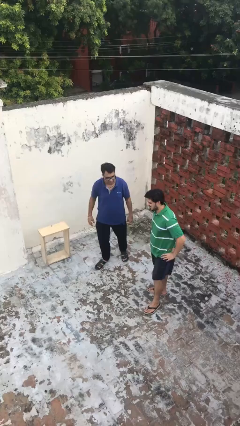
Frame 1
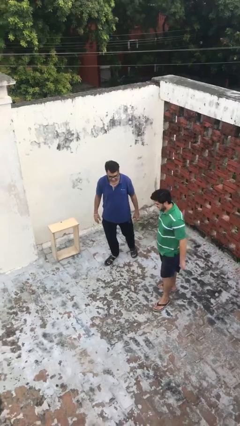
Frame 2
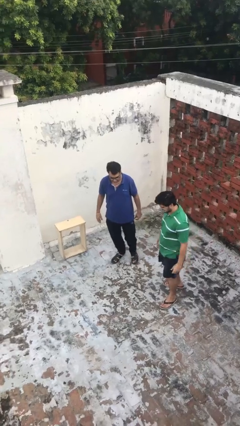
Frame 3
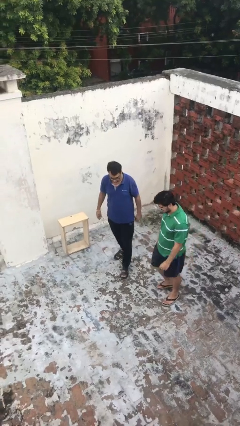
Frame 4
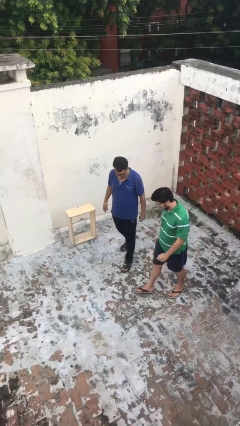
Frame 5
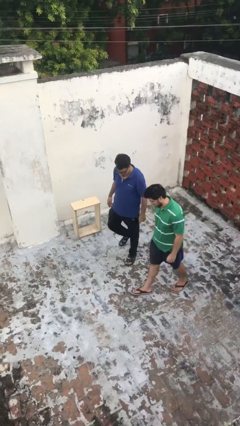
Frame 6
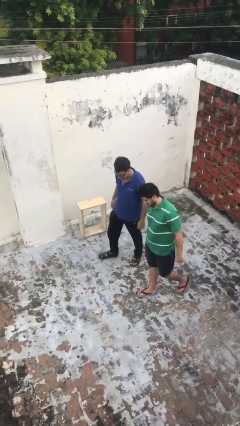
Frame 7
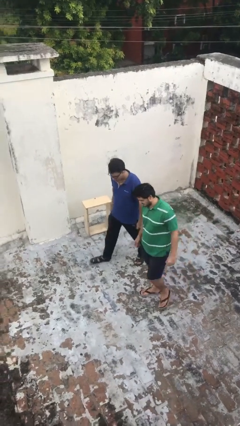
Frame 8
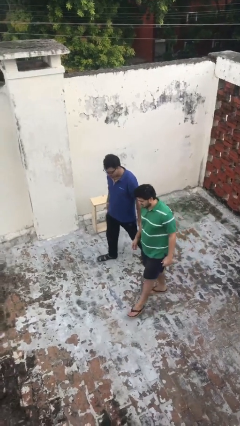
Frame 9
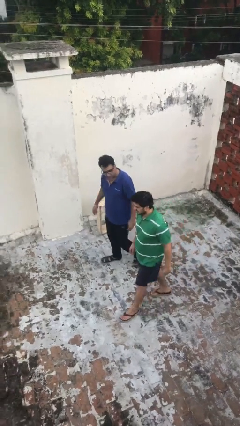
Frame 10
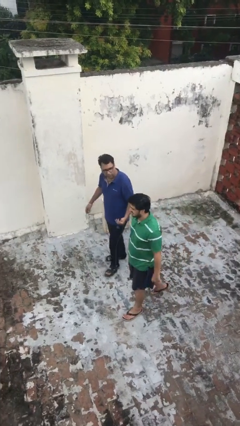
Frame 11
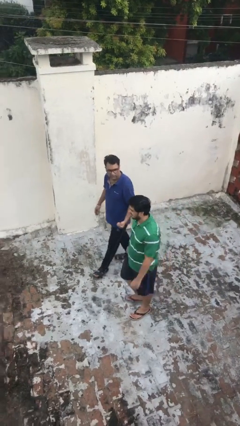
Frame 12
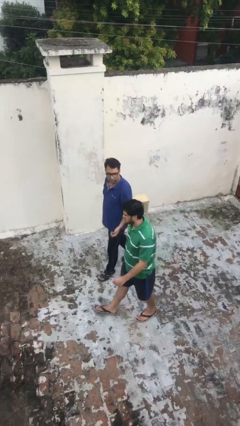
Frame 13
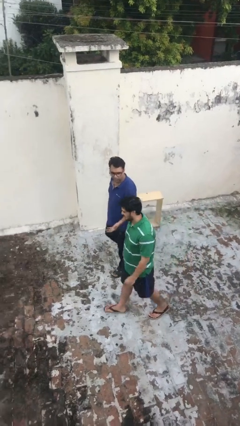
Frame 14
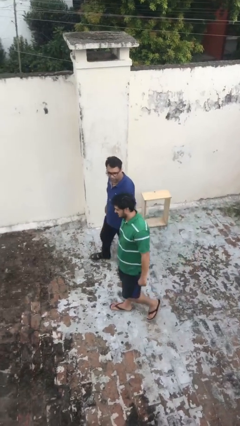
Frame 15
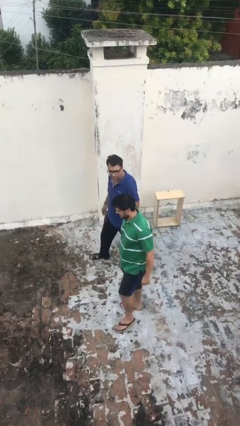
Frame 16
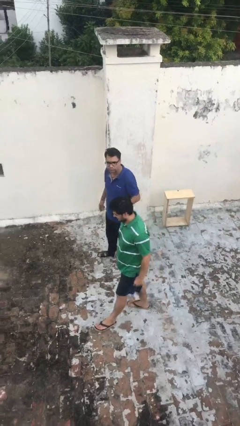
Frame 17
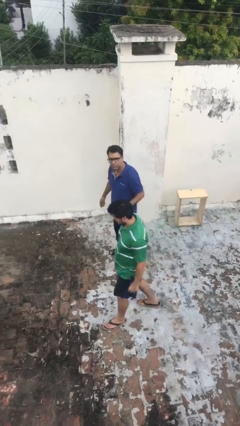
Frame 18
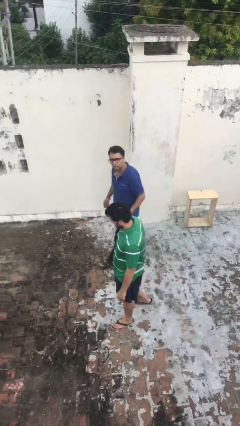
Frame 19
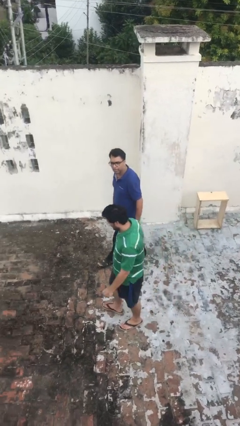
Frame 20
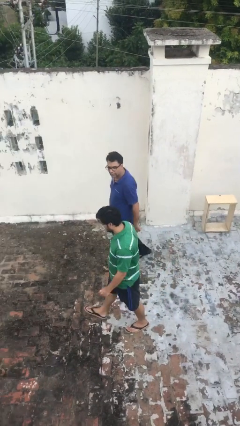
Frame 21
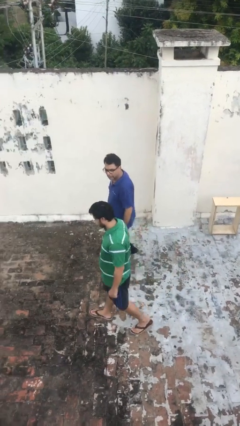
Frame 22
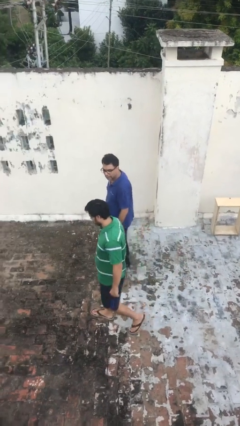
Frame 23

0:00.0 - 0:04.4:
person talks to person

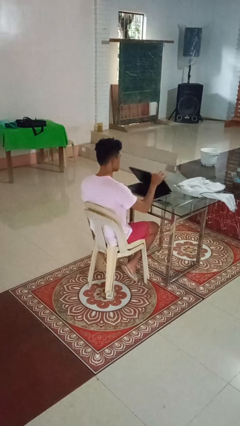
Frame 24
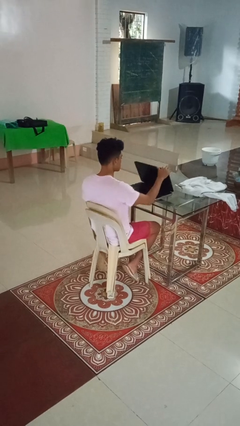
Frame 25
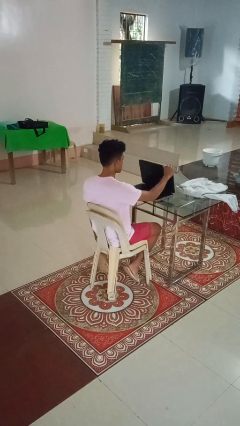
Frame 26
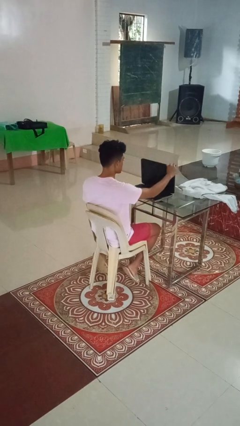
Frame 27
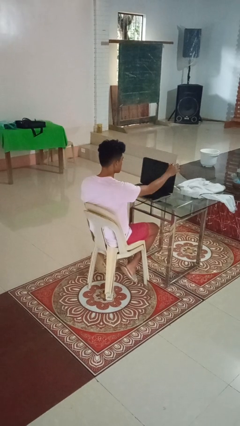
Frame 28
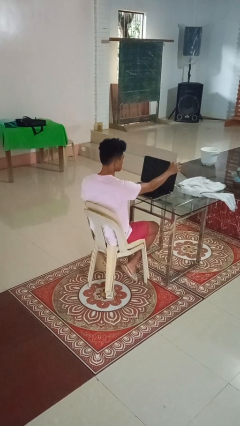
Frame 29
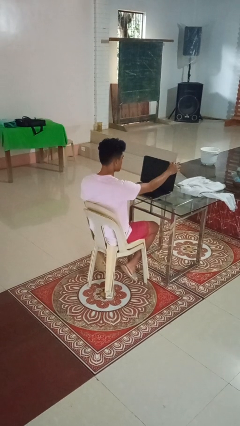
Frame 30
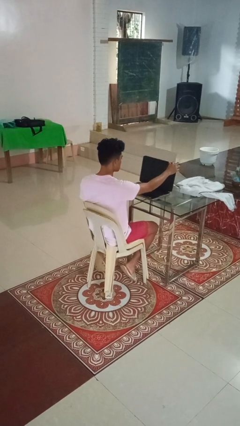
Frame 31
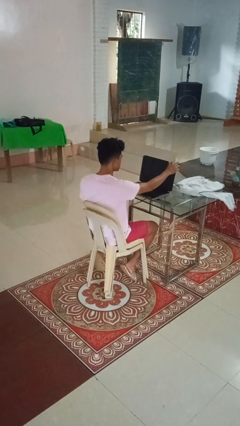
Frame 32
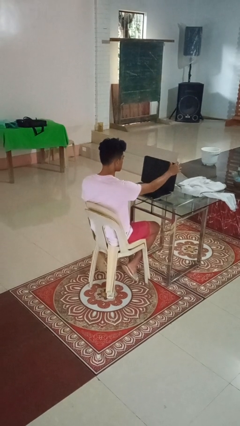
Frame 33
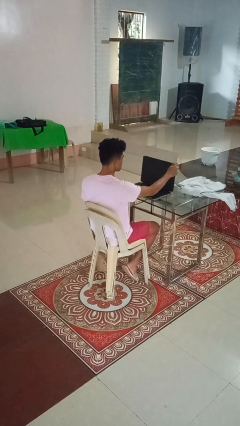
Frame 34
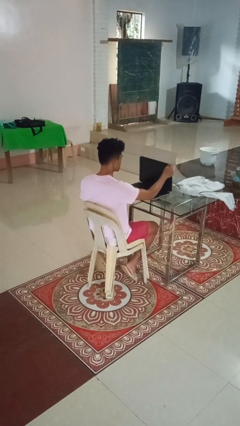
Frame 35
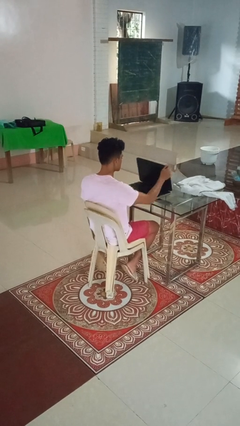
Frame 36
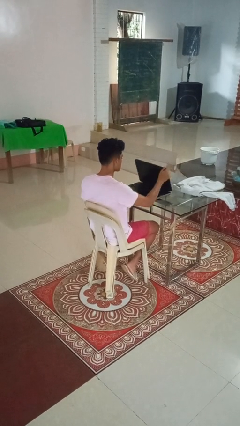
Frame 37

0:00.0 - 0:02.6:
person opens laptop

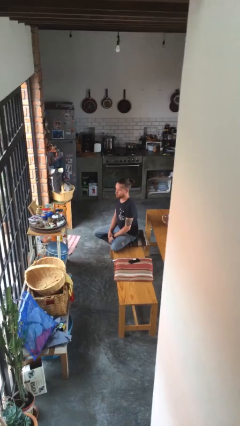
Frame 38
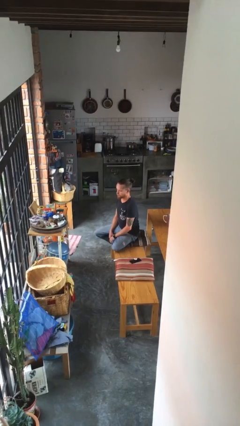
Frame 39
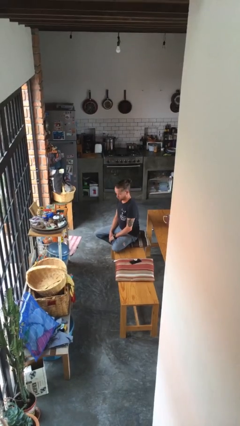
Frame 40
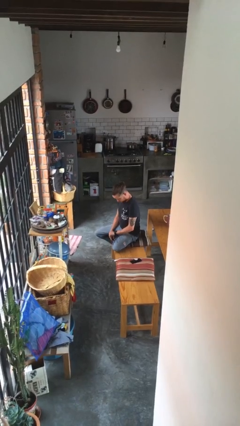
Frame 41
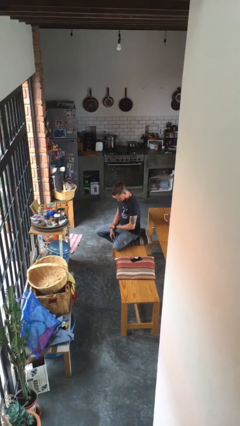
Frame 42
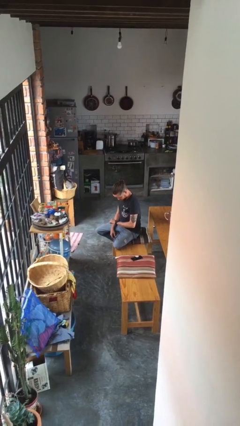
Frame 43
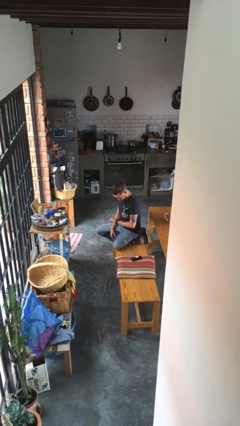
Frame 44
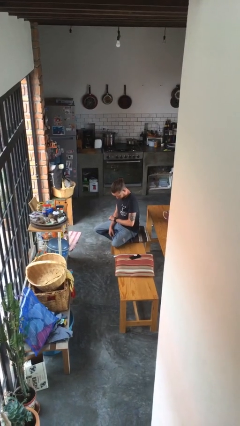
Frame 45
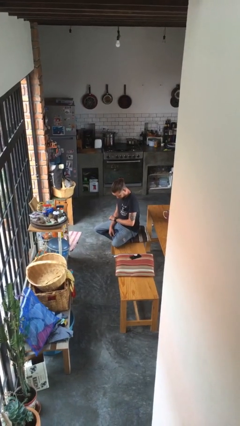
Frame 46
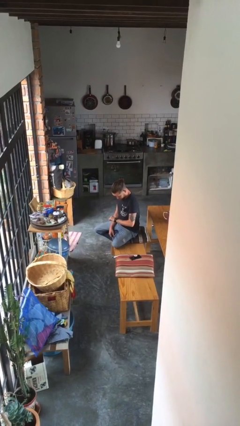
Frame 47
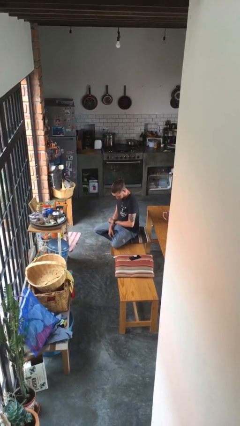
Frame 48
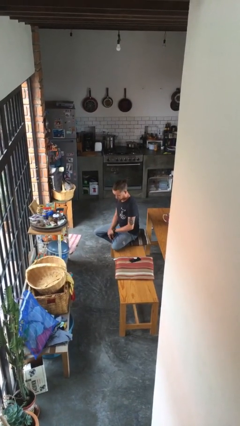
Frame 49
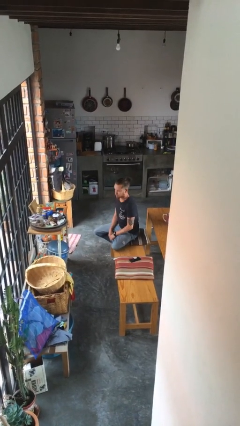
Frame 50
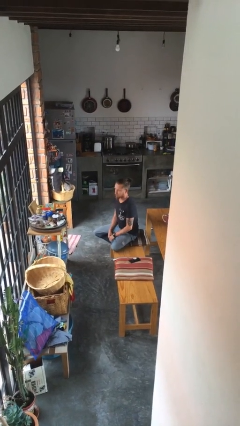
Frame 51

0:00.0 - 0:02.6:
person looks at wristwatch

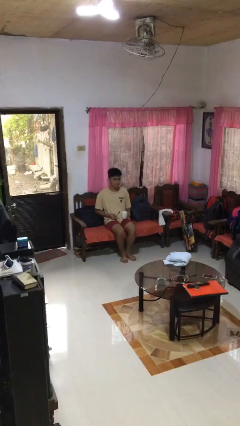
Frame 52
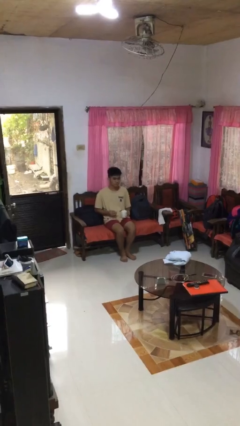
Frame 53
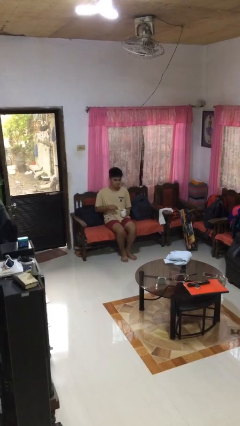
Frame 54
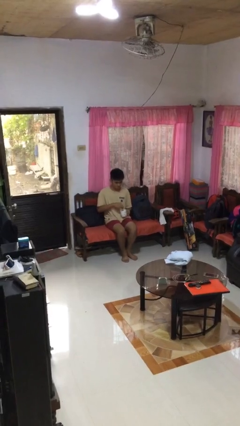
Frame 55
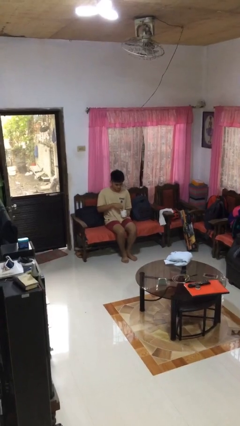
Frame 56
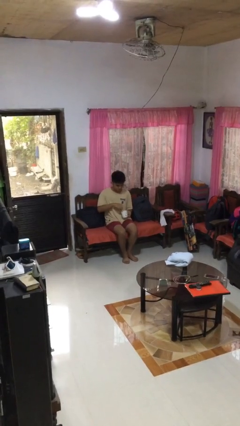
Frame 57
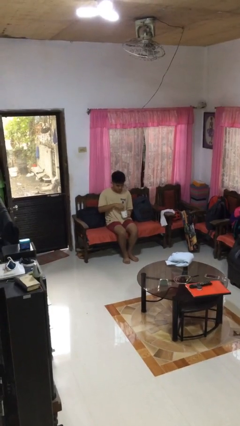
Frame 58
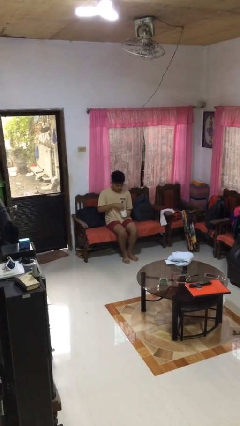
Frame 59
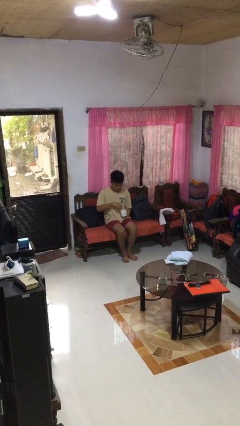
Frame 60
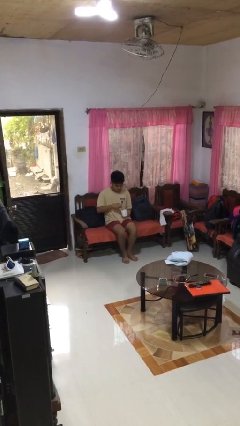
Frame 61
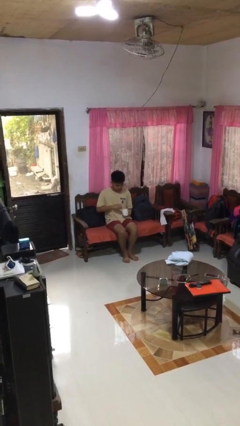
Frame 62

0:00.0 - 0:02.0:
person stirs mug

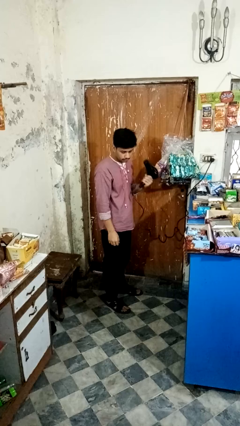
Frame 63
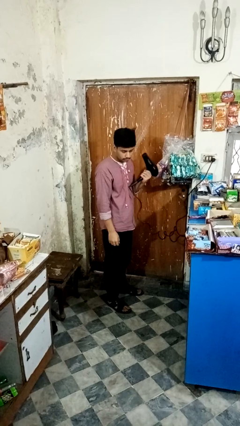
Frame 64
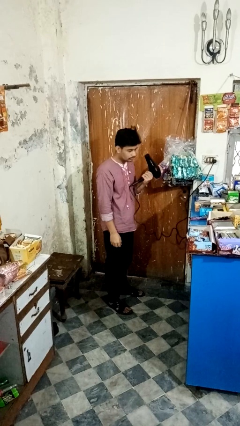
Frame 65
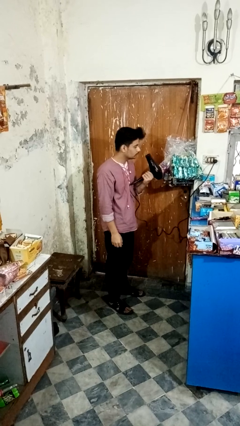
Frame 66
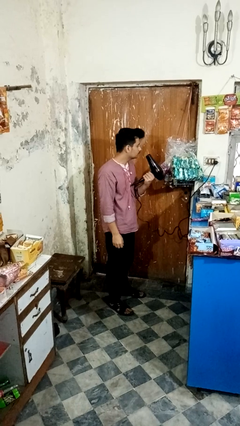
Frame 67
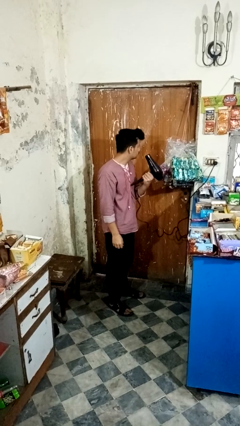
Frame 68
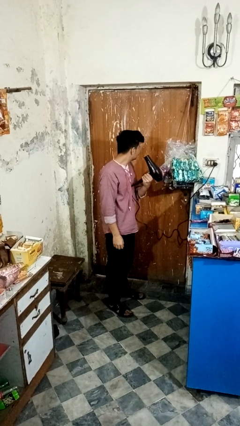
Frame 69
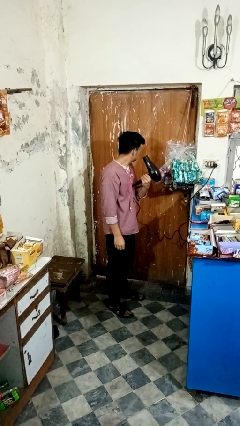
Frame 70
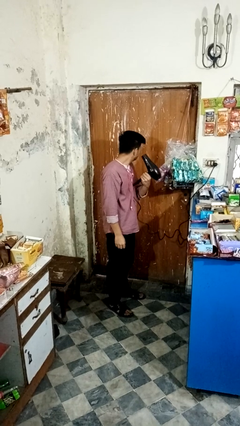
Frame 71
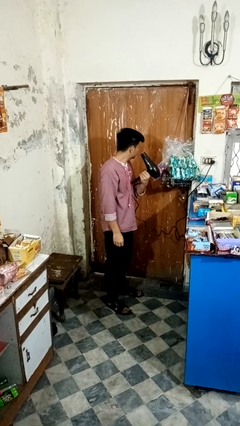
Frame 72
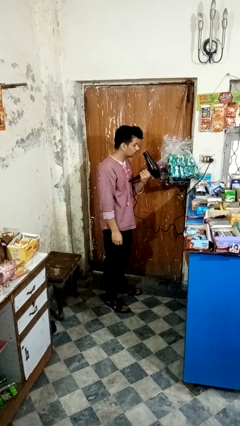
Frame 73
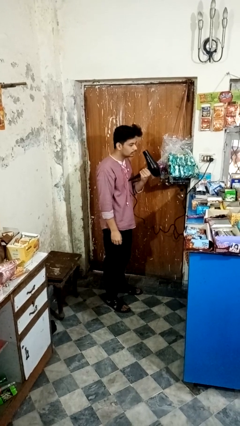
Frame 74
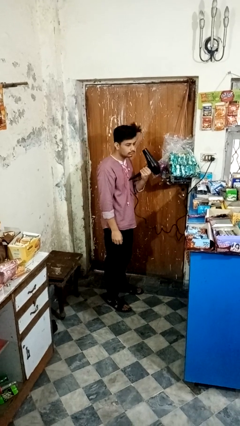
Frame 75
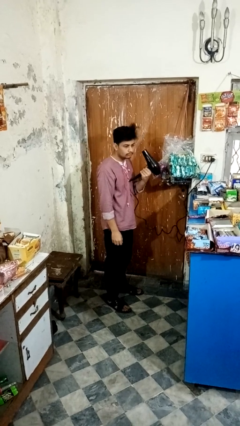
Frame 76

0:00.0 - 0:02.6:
person dries hair with hairdryer

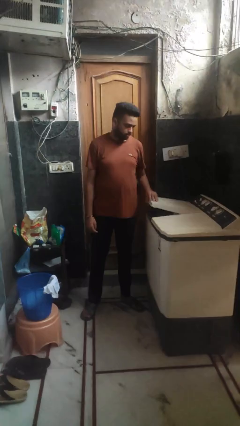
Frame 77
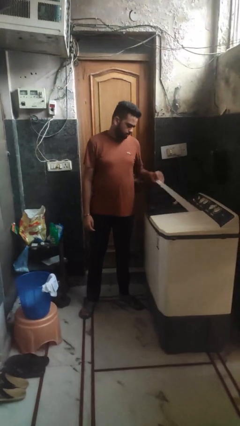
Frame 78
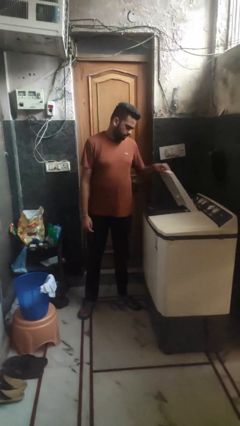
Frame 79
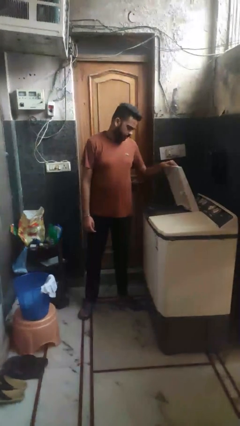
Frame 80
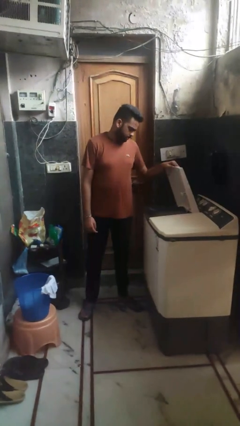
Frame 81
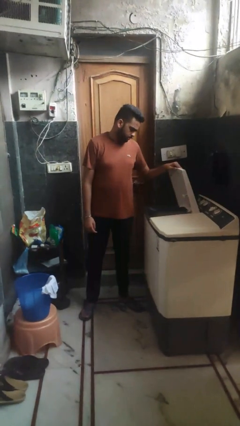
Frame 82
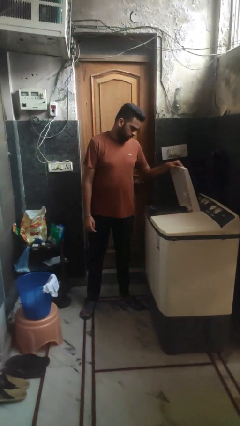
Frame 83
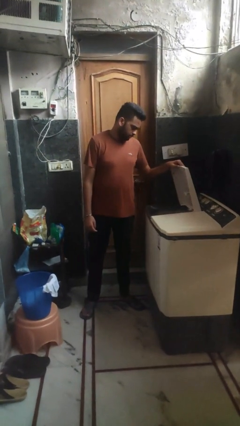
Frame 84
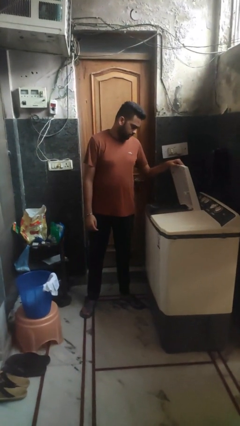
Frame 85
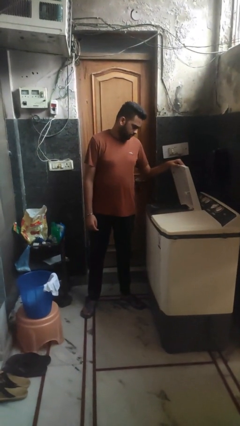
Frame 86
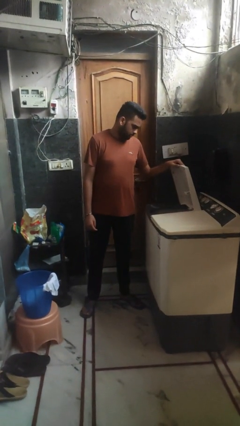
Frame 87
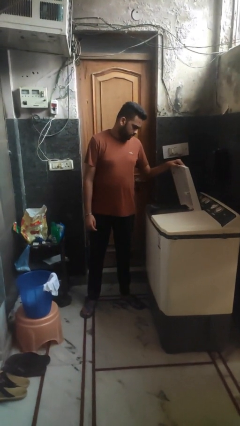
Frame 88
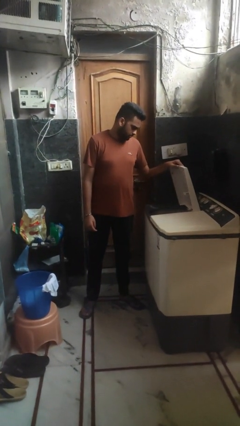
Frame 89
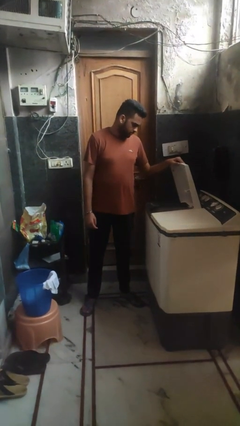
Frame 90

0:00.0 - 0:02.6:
person opens clothes washer

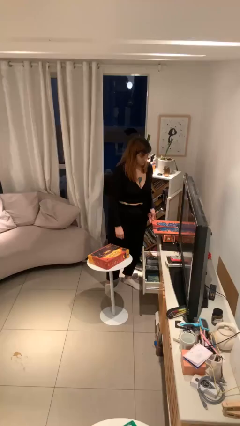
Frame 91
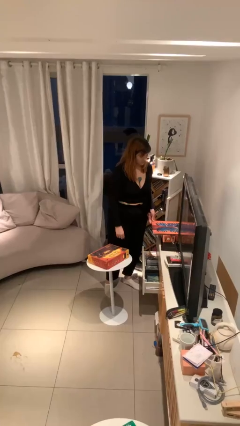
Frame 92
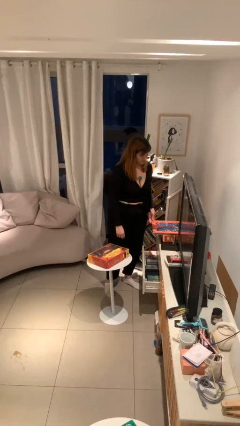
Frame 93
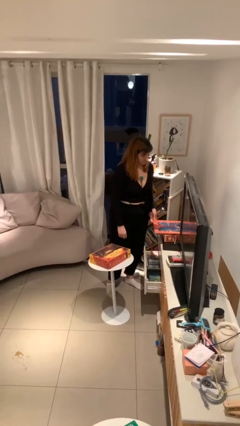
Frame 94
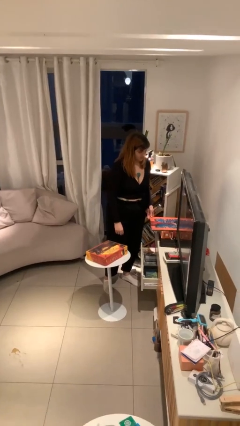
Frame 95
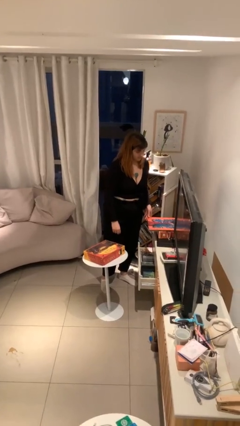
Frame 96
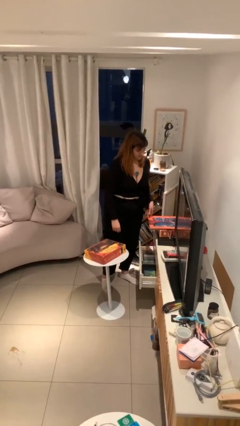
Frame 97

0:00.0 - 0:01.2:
person picks up object from table
